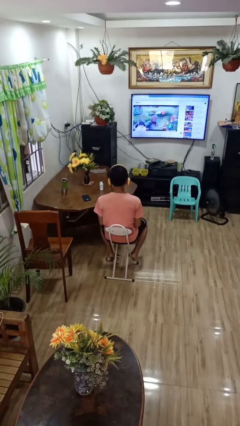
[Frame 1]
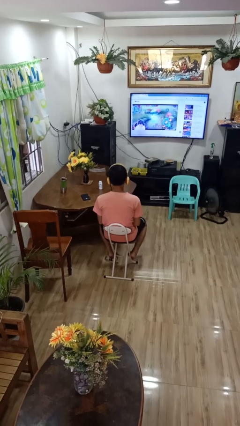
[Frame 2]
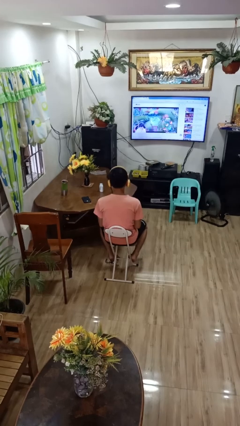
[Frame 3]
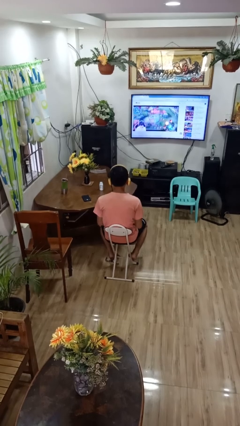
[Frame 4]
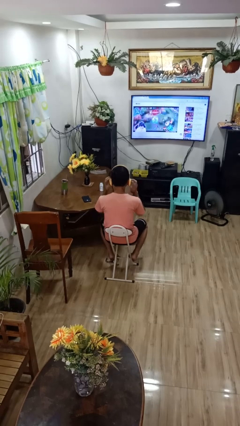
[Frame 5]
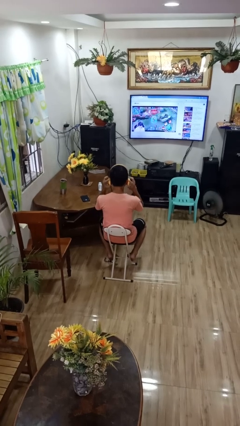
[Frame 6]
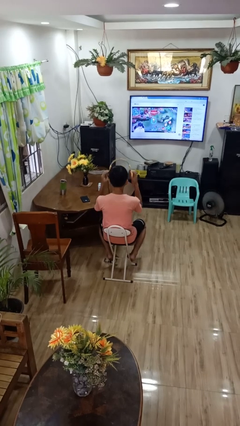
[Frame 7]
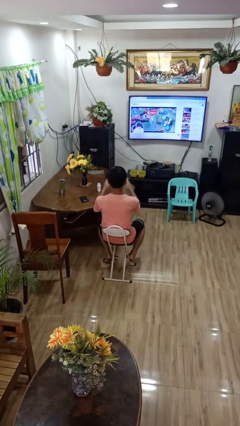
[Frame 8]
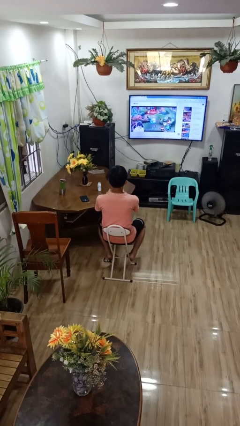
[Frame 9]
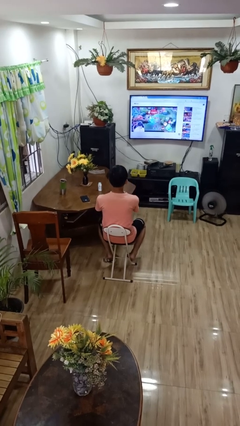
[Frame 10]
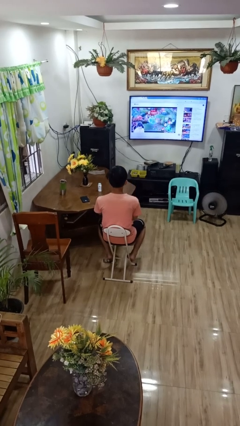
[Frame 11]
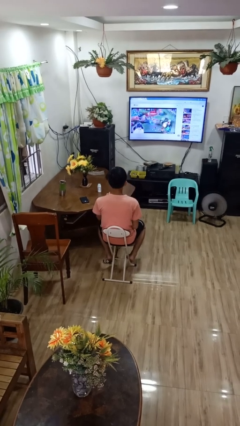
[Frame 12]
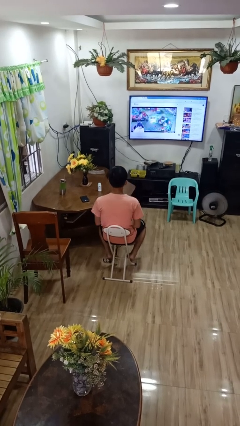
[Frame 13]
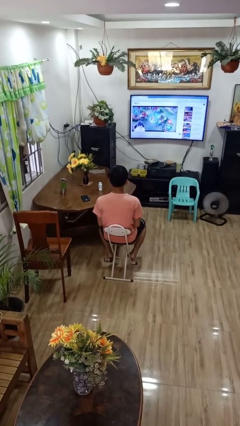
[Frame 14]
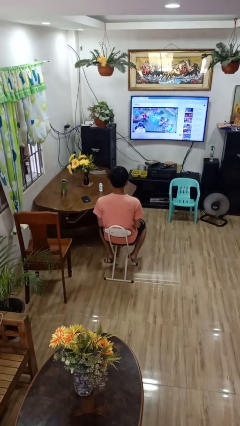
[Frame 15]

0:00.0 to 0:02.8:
person takes off headphones

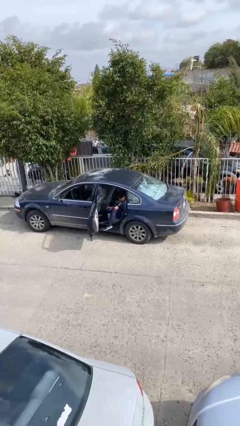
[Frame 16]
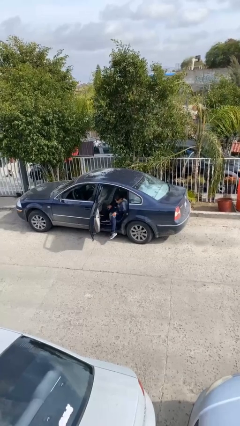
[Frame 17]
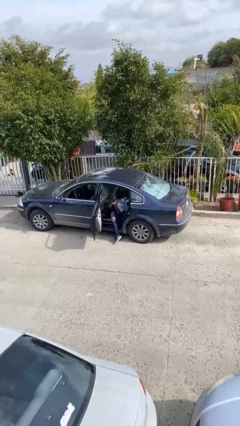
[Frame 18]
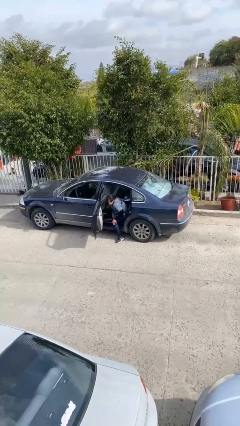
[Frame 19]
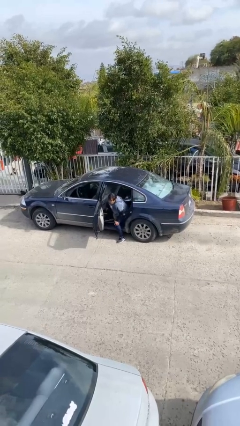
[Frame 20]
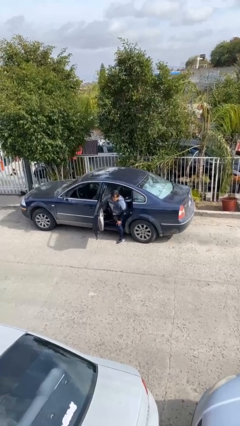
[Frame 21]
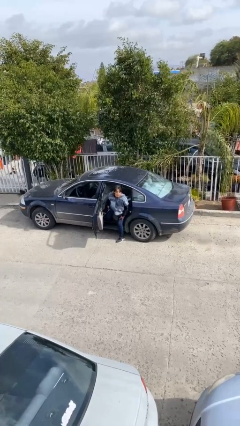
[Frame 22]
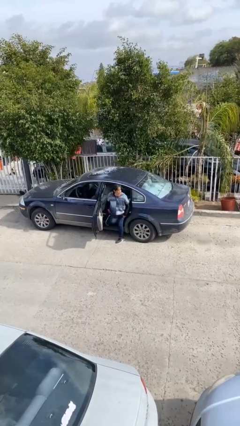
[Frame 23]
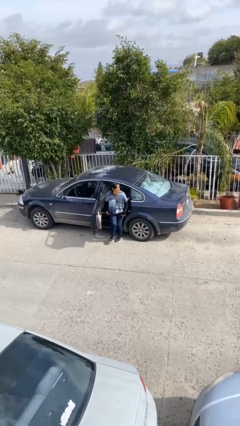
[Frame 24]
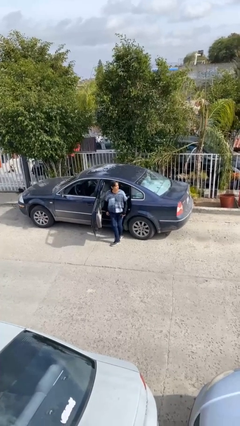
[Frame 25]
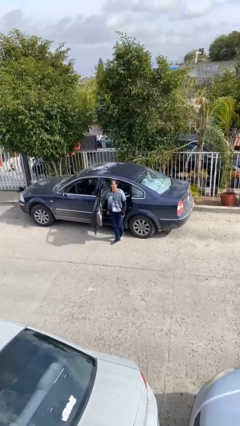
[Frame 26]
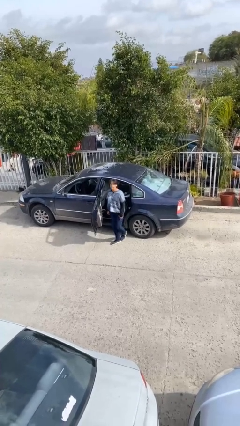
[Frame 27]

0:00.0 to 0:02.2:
person exits car

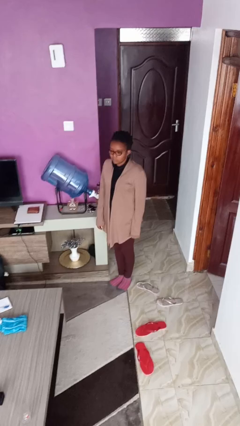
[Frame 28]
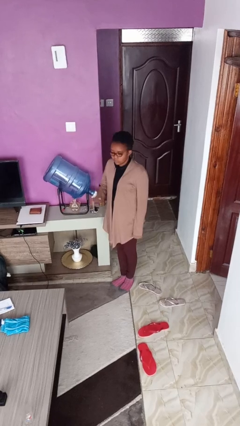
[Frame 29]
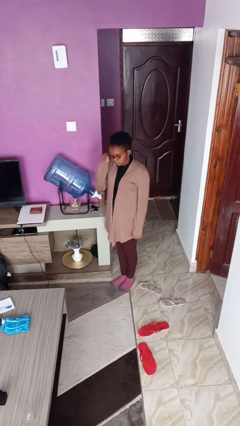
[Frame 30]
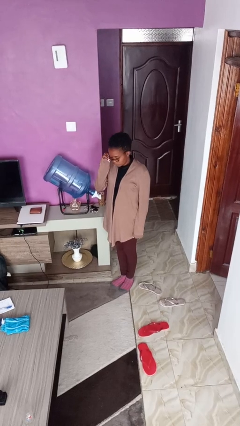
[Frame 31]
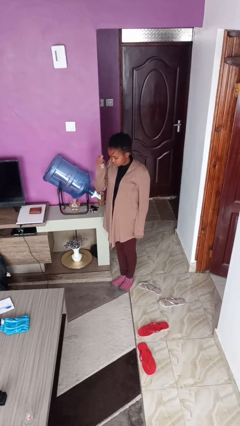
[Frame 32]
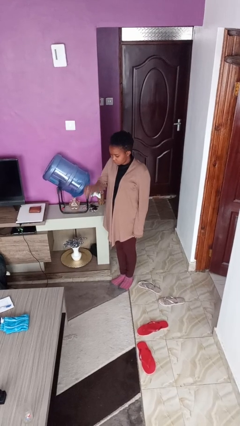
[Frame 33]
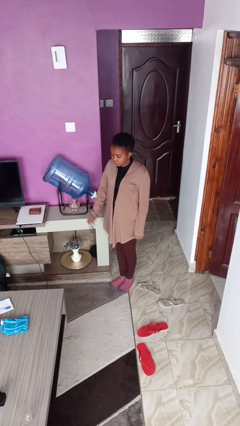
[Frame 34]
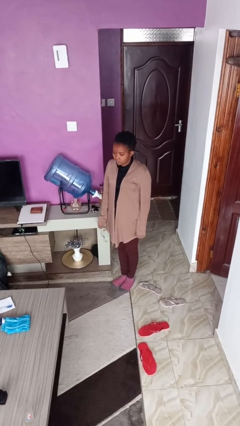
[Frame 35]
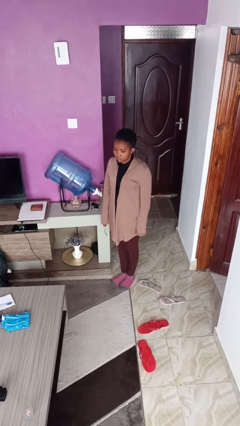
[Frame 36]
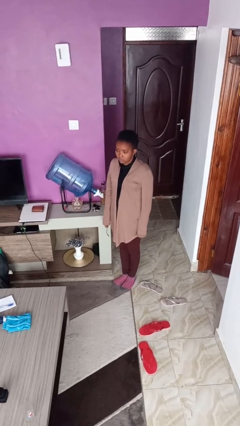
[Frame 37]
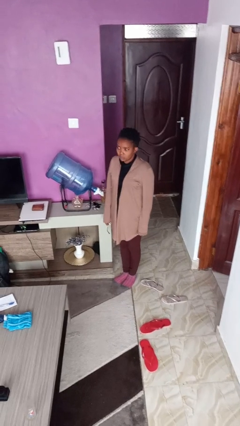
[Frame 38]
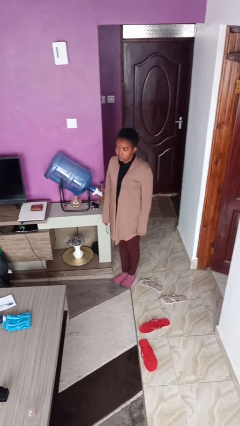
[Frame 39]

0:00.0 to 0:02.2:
person takes off glasses

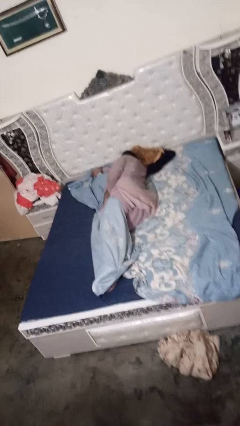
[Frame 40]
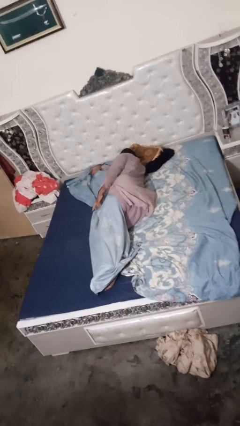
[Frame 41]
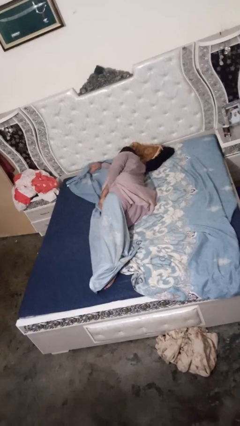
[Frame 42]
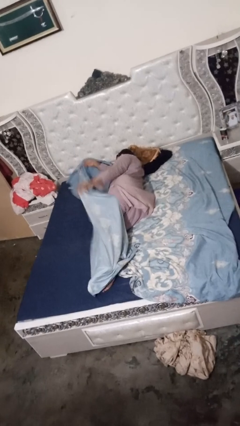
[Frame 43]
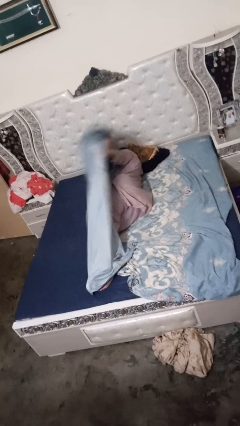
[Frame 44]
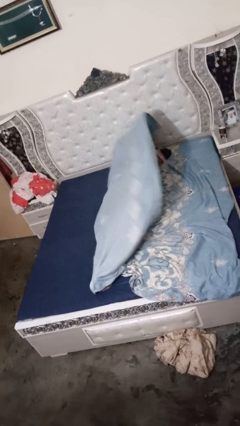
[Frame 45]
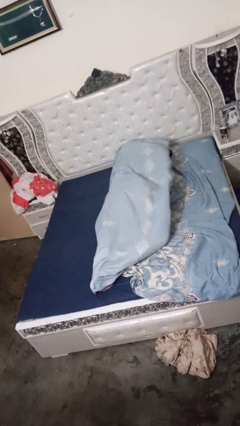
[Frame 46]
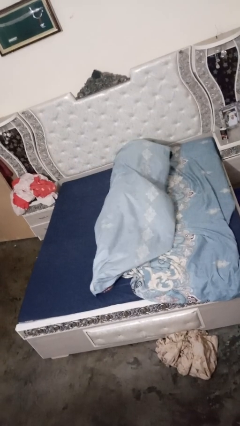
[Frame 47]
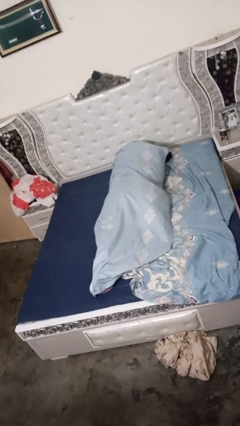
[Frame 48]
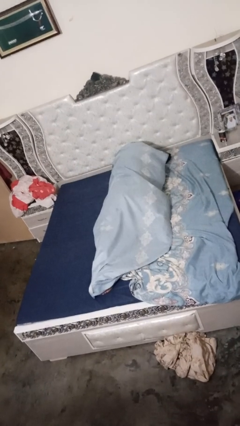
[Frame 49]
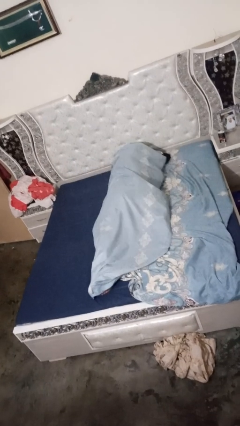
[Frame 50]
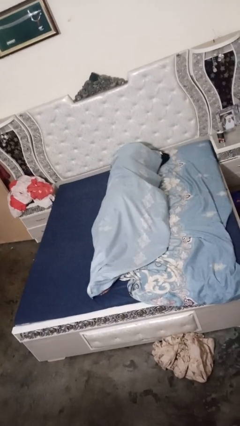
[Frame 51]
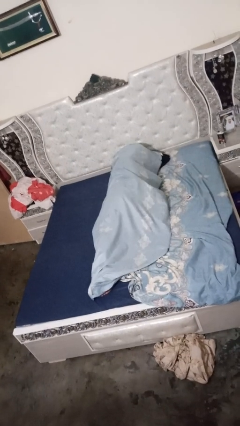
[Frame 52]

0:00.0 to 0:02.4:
person covers with bedsheets

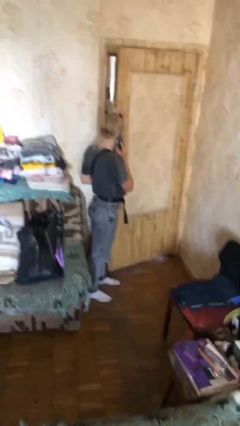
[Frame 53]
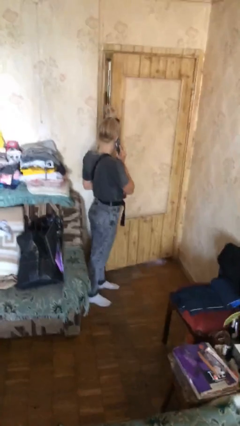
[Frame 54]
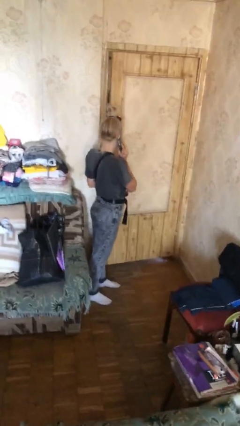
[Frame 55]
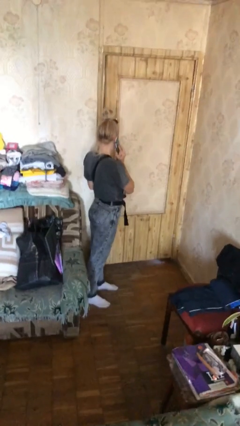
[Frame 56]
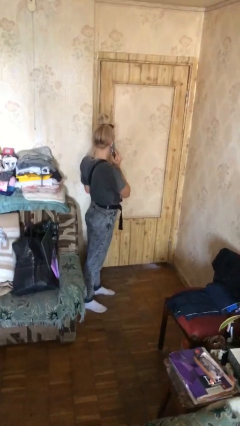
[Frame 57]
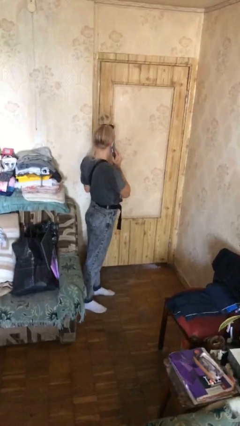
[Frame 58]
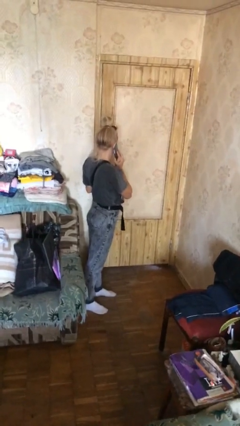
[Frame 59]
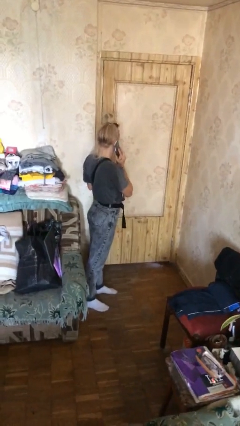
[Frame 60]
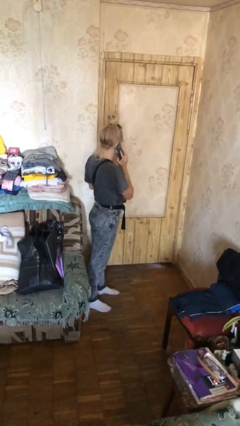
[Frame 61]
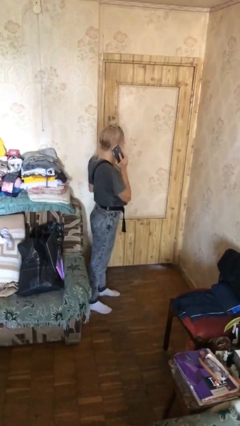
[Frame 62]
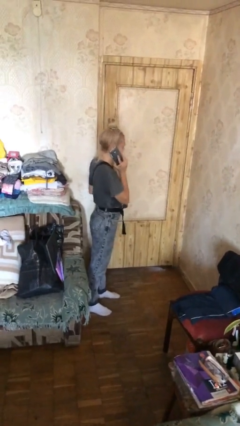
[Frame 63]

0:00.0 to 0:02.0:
person closes facility door

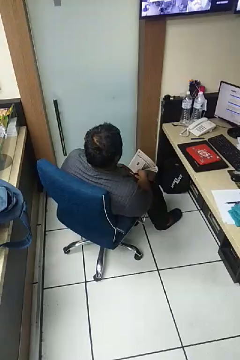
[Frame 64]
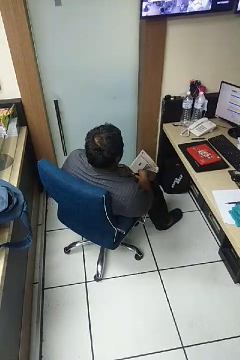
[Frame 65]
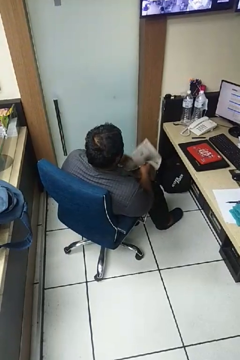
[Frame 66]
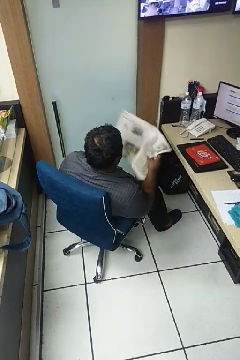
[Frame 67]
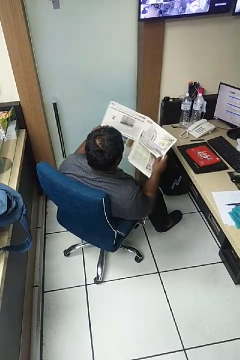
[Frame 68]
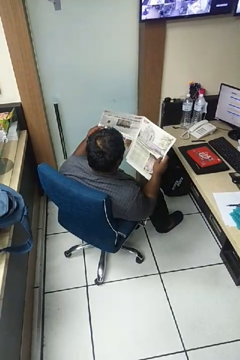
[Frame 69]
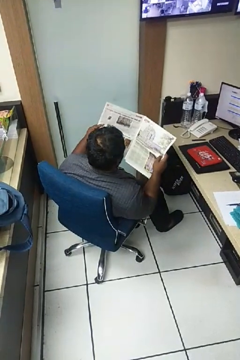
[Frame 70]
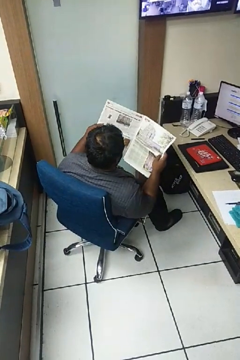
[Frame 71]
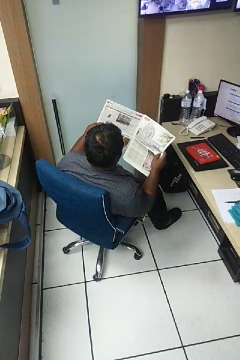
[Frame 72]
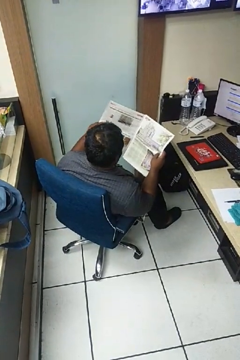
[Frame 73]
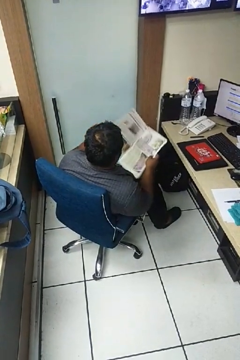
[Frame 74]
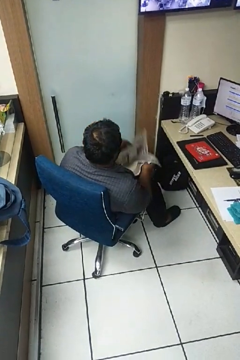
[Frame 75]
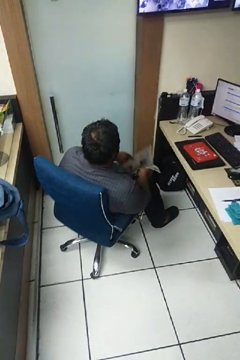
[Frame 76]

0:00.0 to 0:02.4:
person reads newspaper

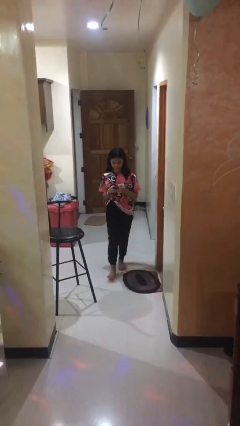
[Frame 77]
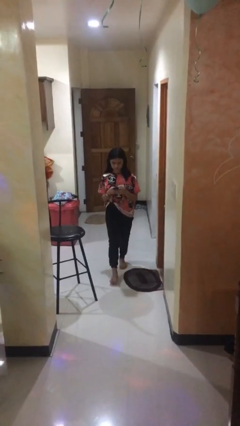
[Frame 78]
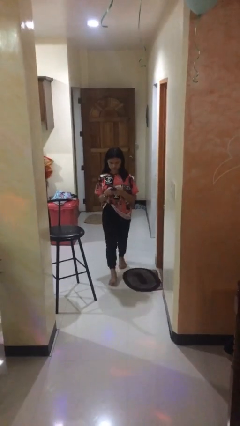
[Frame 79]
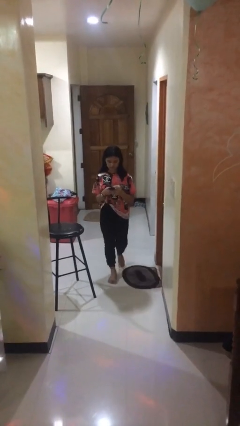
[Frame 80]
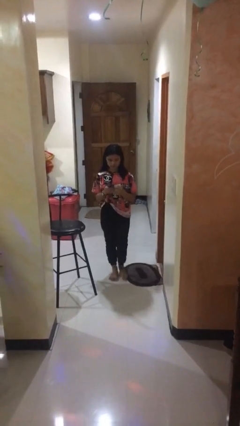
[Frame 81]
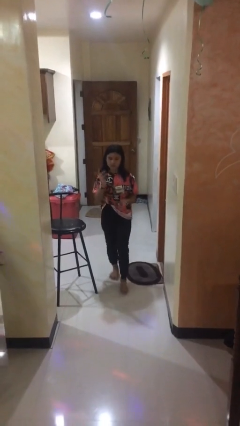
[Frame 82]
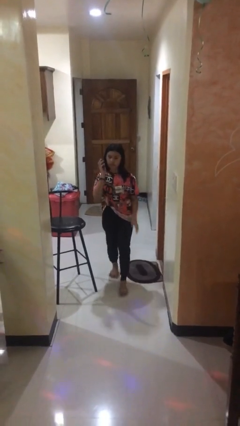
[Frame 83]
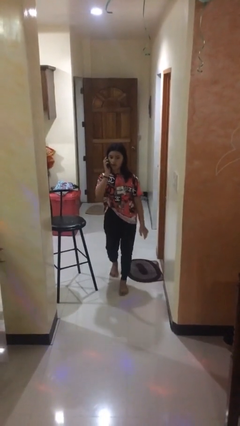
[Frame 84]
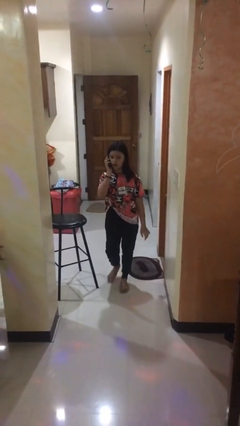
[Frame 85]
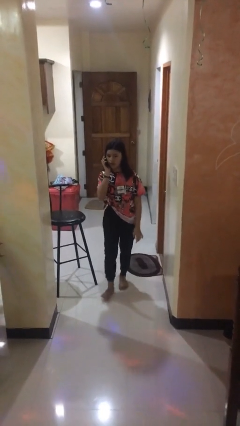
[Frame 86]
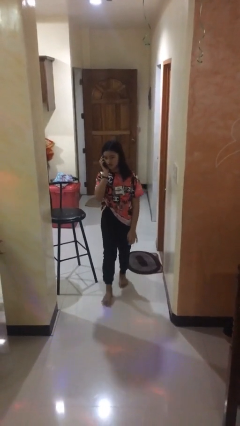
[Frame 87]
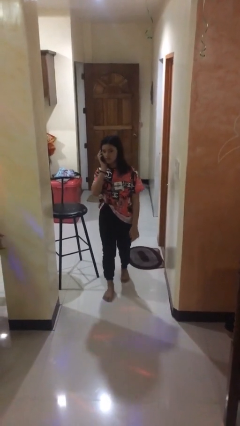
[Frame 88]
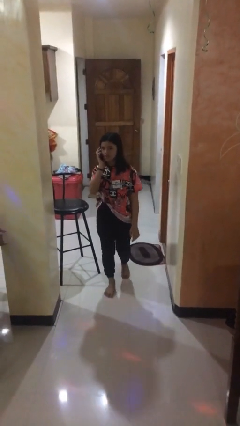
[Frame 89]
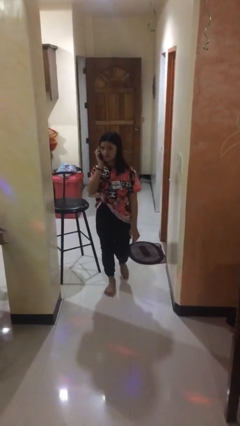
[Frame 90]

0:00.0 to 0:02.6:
person talks on phone

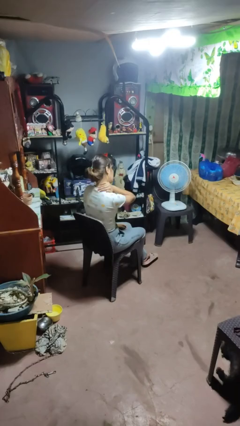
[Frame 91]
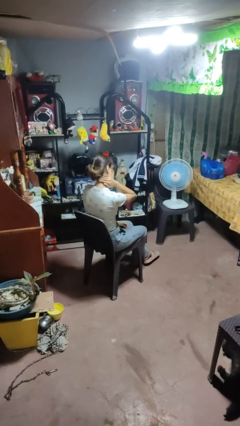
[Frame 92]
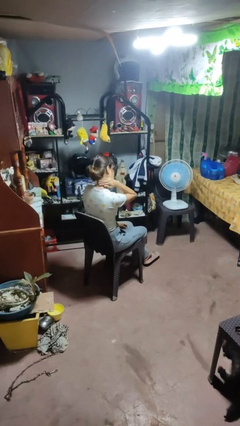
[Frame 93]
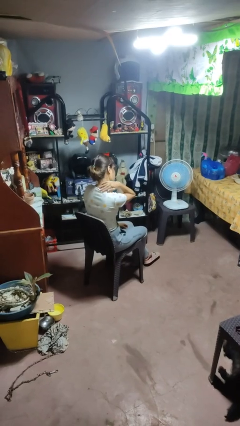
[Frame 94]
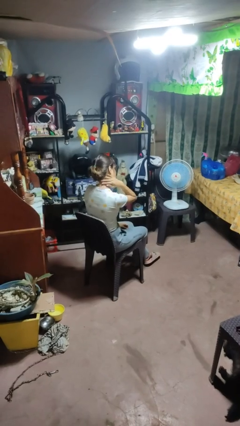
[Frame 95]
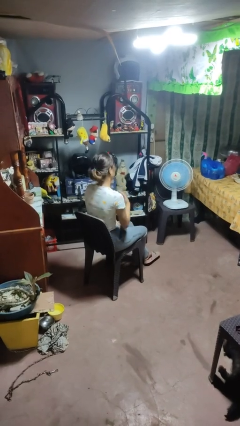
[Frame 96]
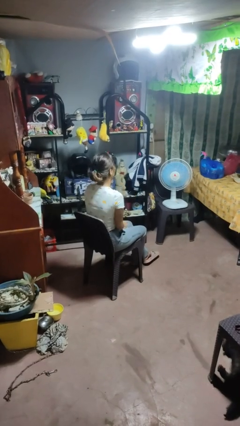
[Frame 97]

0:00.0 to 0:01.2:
person rubs neck
